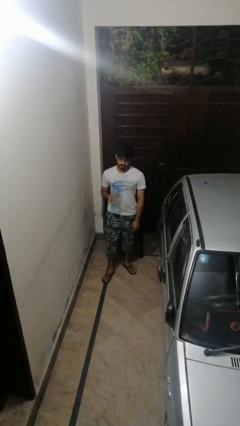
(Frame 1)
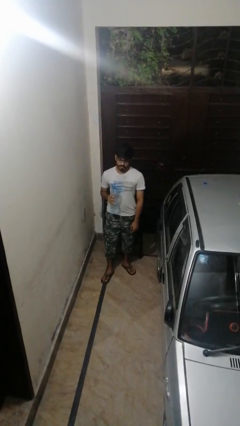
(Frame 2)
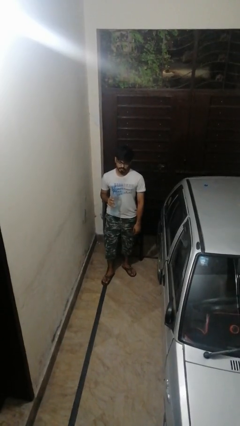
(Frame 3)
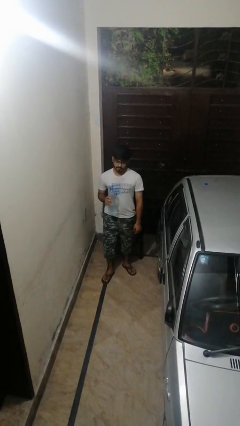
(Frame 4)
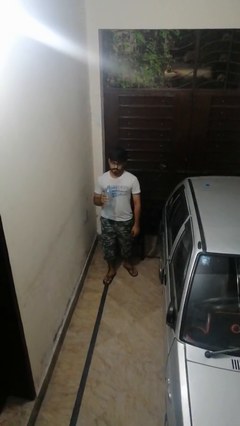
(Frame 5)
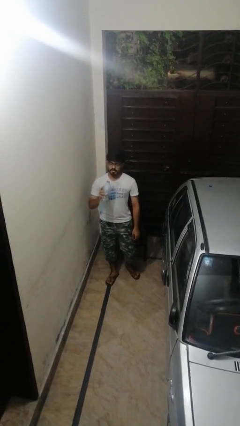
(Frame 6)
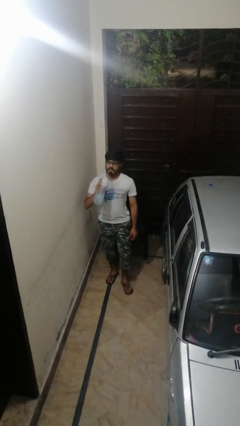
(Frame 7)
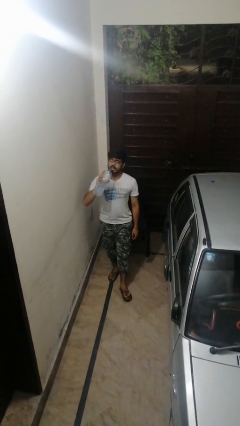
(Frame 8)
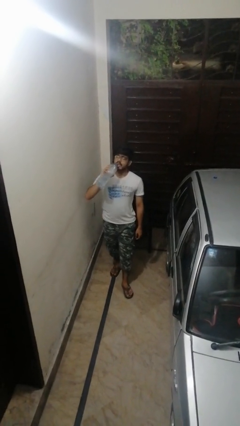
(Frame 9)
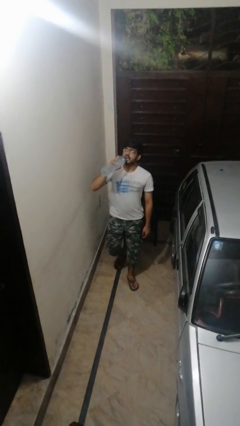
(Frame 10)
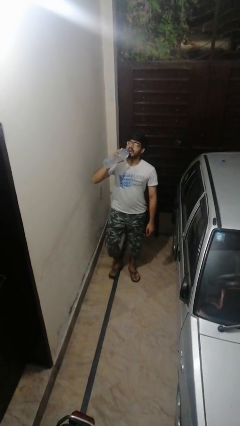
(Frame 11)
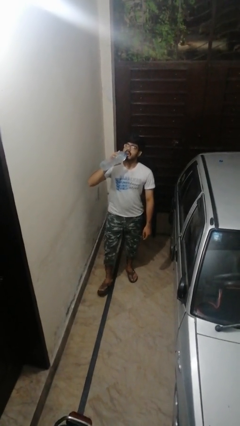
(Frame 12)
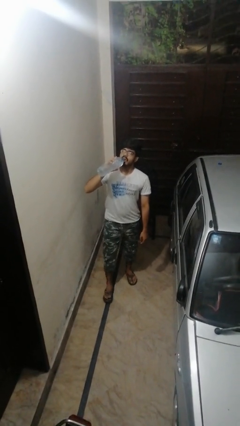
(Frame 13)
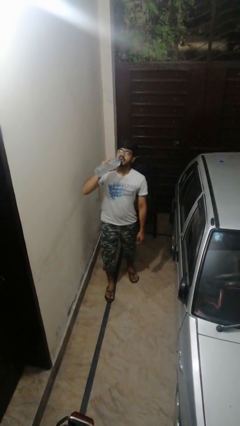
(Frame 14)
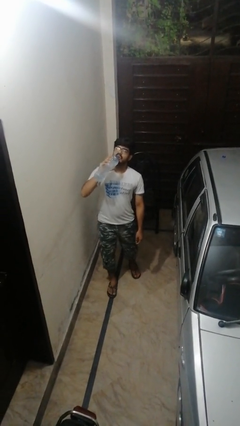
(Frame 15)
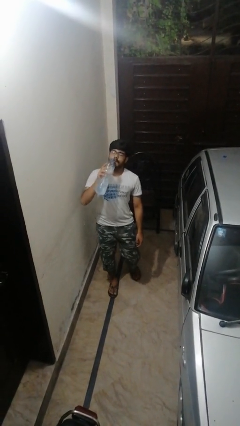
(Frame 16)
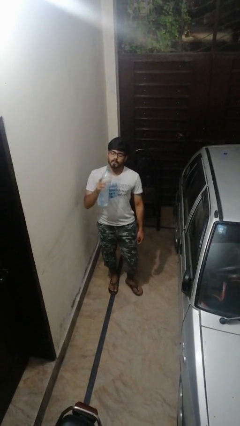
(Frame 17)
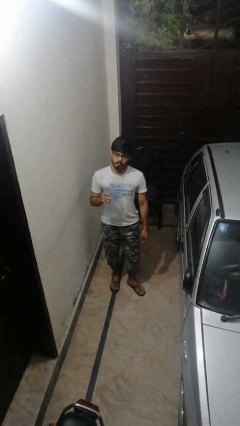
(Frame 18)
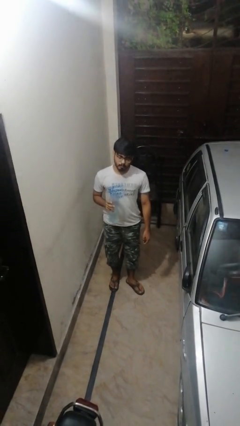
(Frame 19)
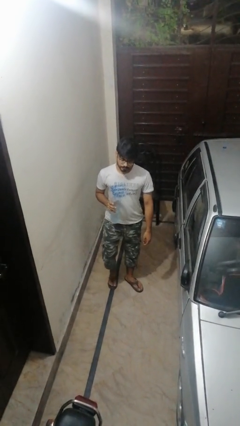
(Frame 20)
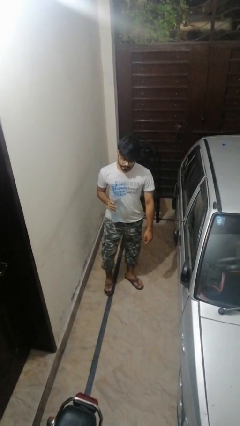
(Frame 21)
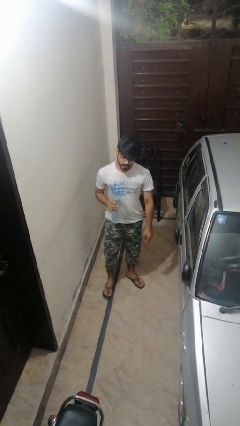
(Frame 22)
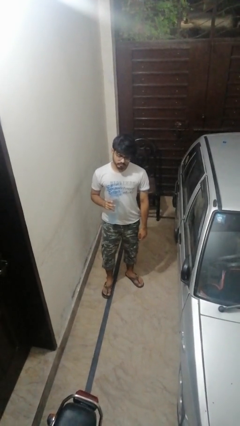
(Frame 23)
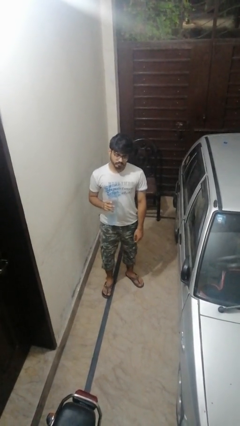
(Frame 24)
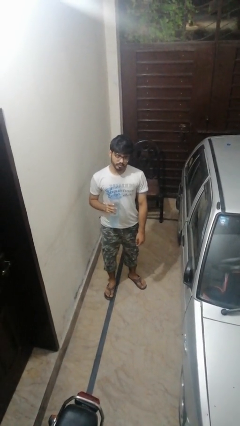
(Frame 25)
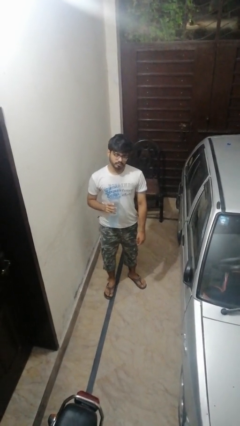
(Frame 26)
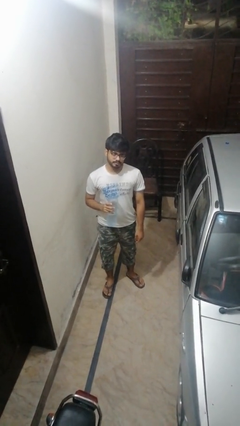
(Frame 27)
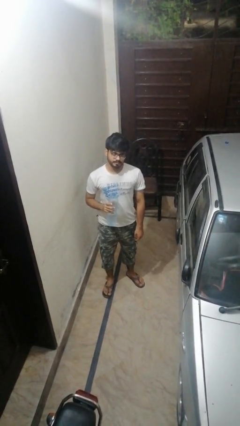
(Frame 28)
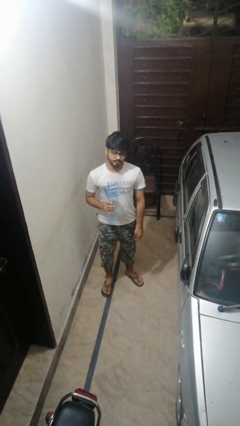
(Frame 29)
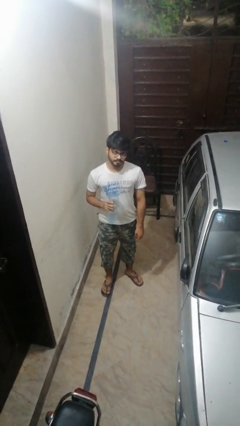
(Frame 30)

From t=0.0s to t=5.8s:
person drinks from bottle

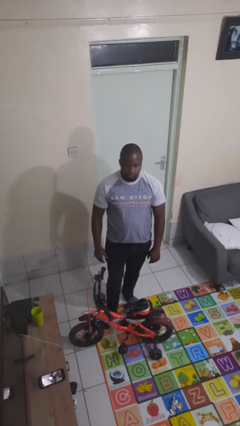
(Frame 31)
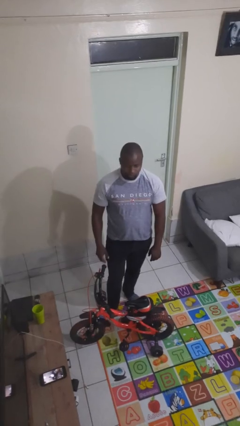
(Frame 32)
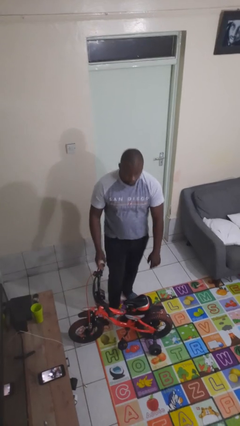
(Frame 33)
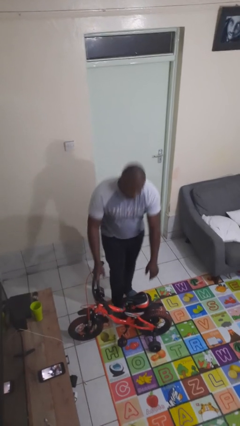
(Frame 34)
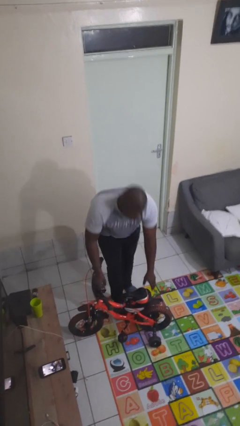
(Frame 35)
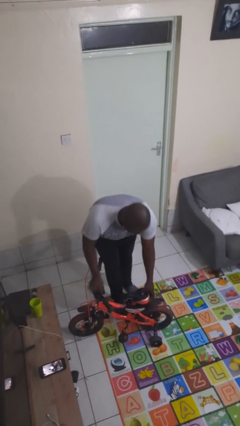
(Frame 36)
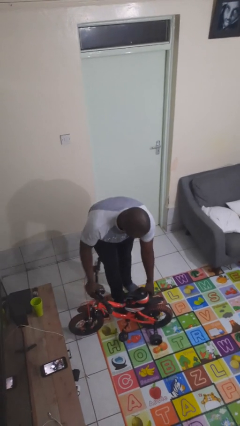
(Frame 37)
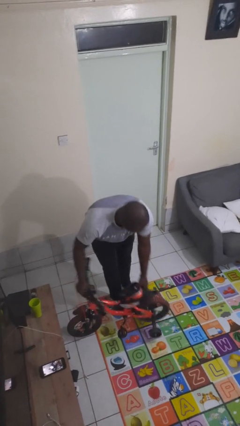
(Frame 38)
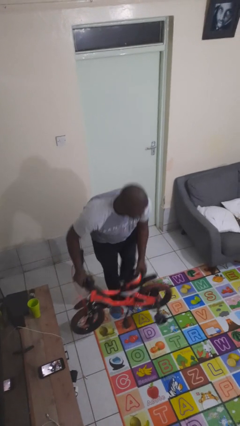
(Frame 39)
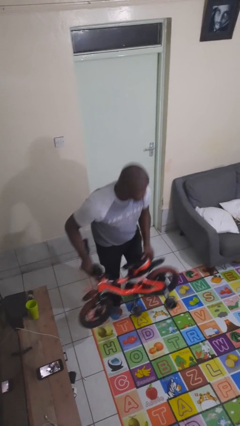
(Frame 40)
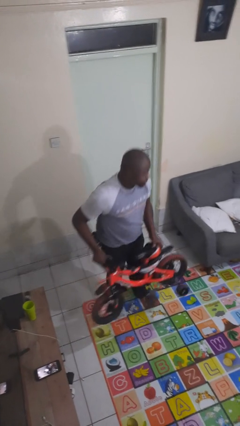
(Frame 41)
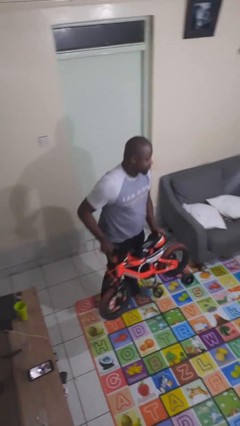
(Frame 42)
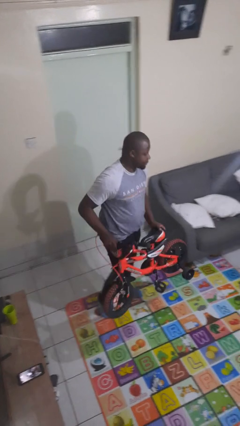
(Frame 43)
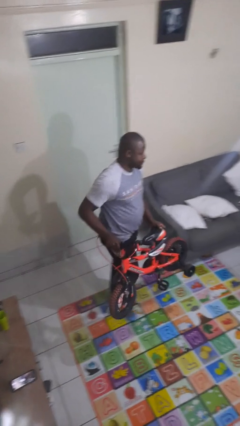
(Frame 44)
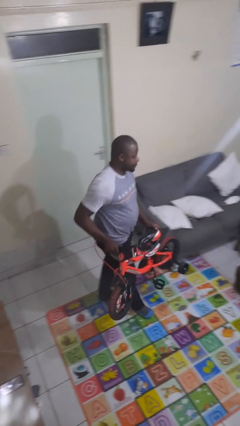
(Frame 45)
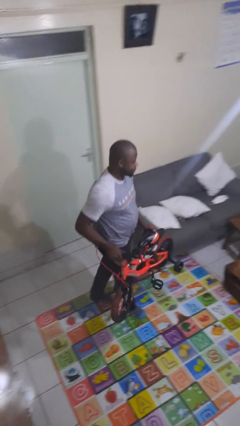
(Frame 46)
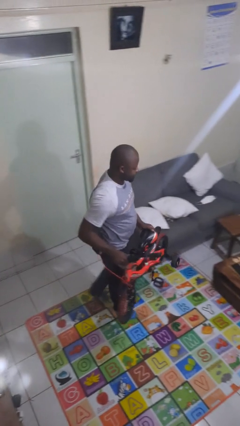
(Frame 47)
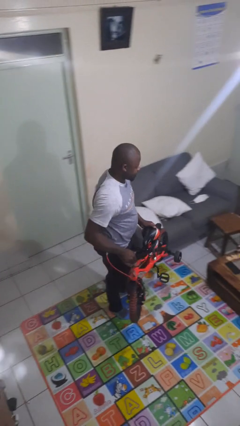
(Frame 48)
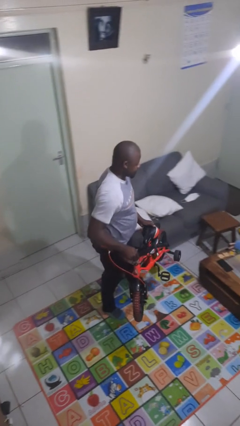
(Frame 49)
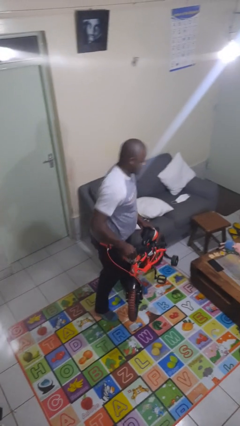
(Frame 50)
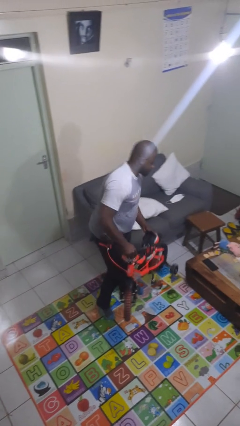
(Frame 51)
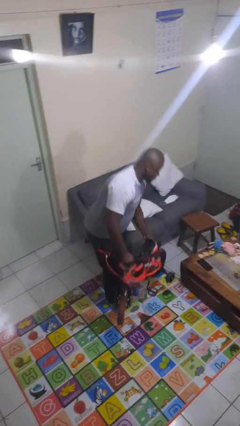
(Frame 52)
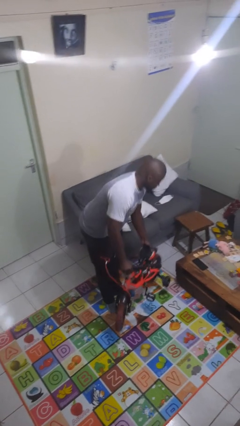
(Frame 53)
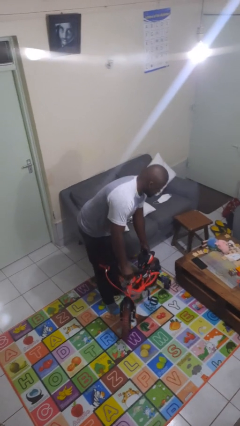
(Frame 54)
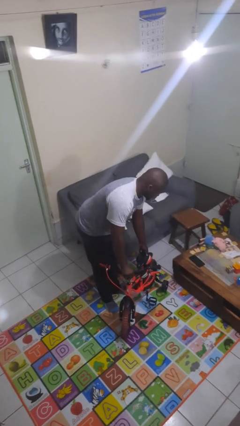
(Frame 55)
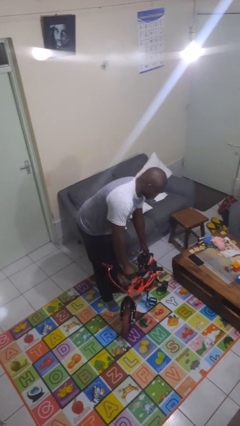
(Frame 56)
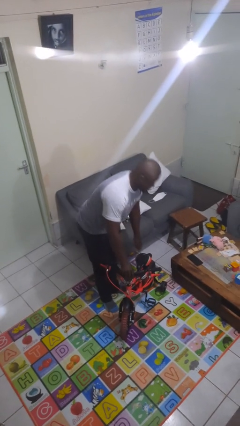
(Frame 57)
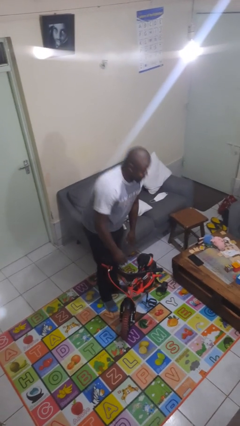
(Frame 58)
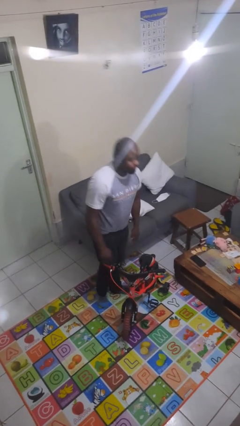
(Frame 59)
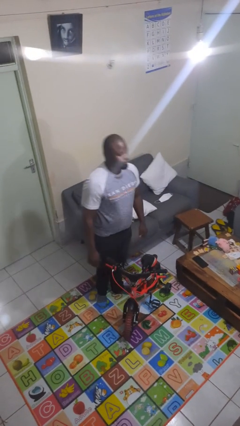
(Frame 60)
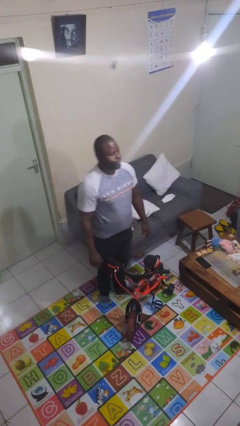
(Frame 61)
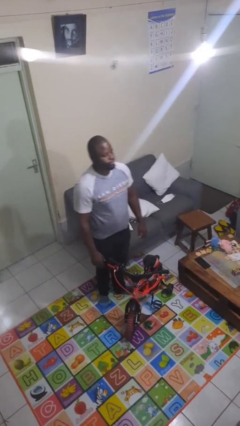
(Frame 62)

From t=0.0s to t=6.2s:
person carries bicycle

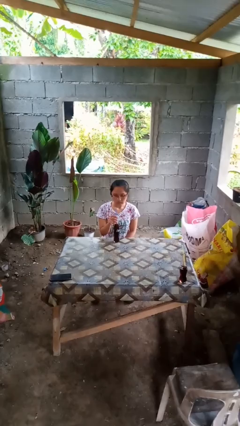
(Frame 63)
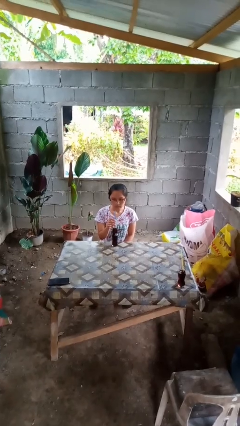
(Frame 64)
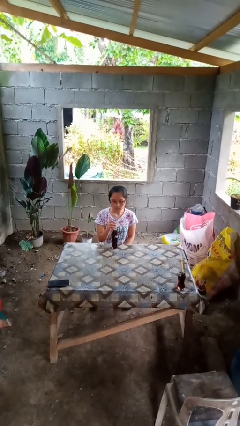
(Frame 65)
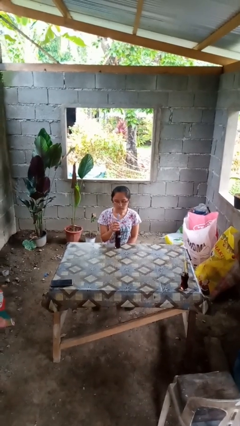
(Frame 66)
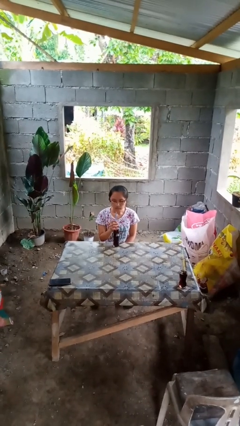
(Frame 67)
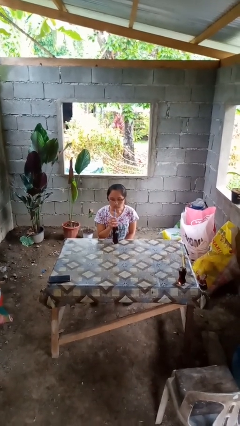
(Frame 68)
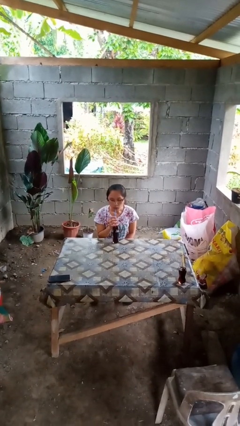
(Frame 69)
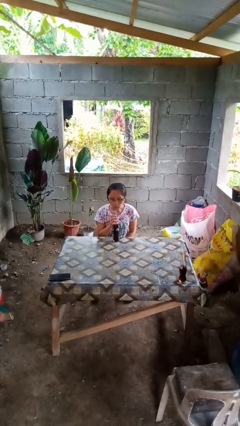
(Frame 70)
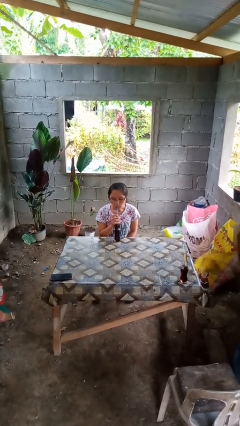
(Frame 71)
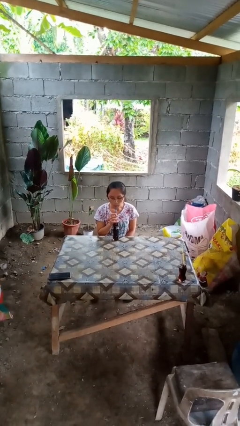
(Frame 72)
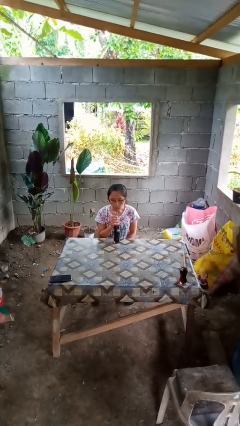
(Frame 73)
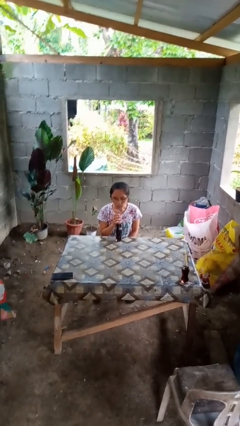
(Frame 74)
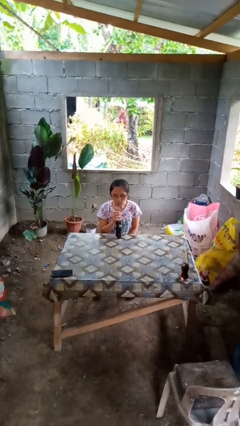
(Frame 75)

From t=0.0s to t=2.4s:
person drinks from straw

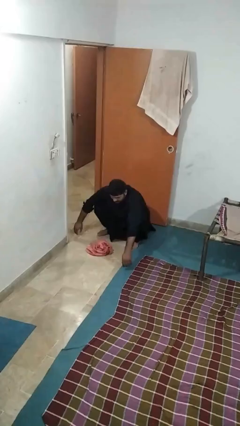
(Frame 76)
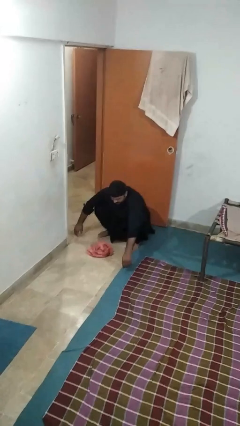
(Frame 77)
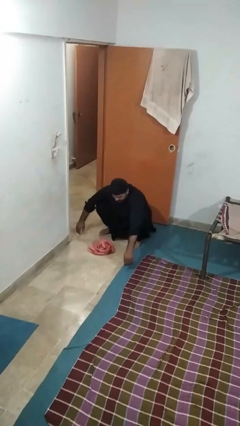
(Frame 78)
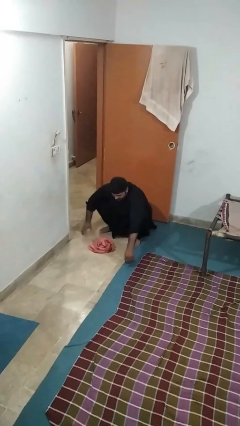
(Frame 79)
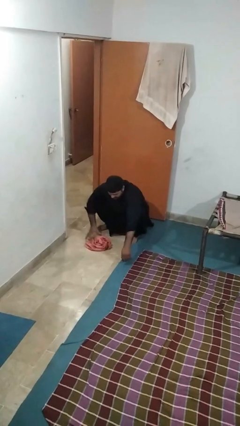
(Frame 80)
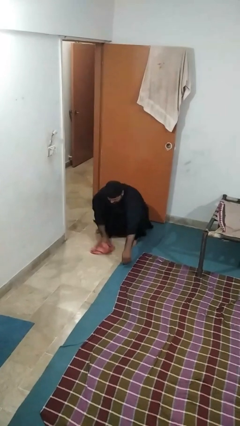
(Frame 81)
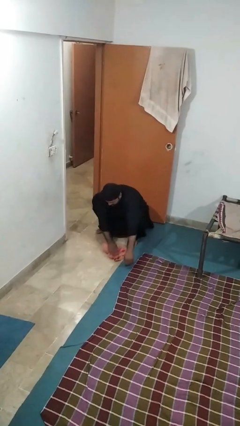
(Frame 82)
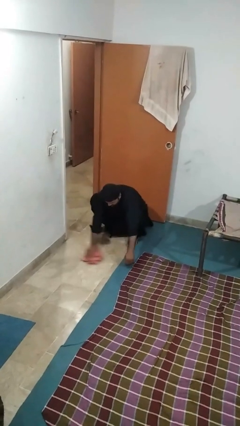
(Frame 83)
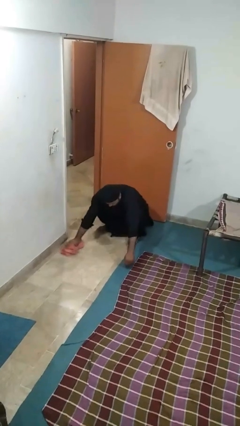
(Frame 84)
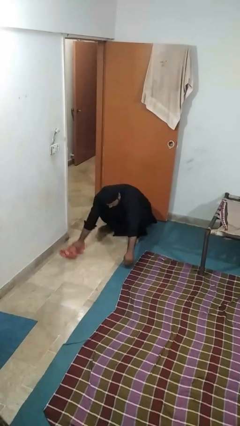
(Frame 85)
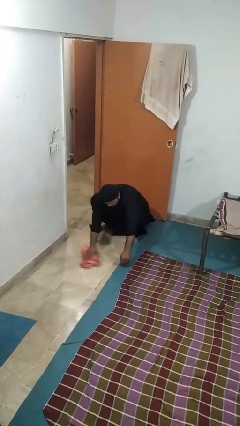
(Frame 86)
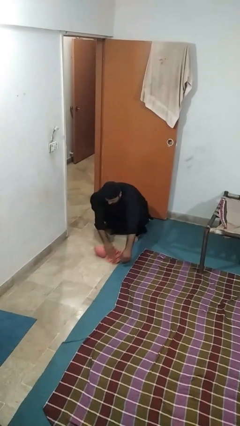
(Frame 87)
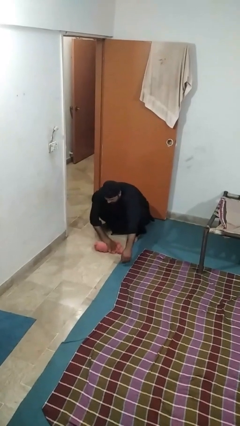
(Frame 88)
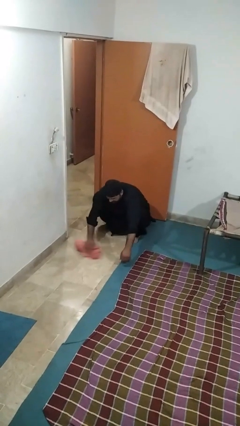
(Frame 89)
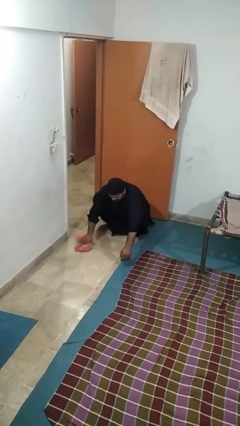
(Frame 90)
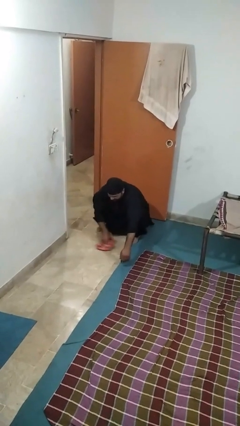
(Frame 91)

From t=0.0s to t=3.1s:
person mops
